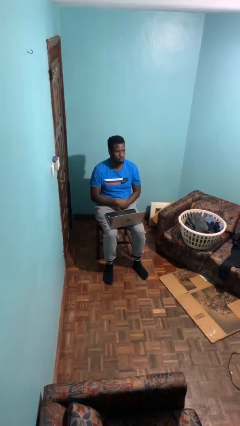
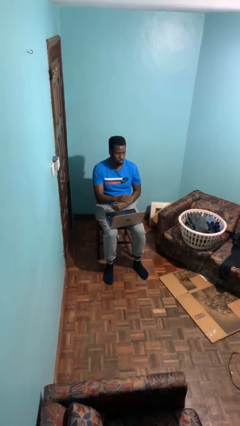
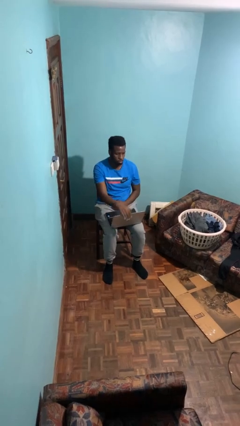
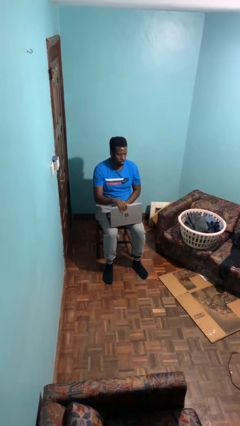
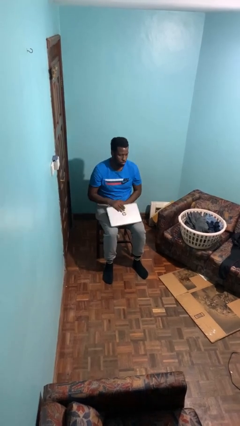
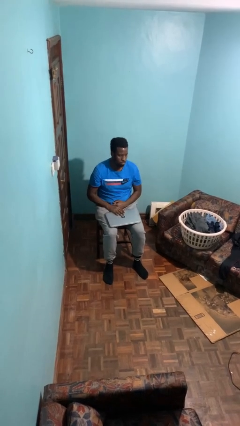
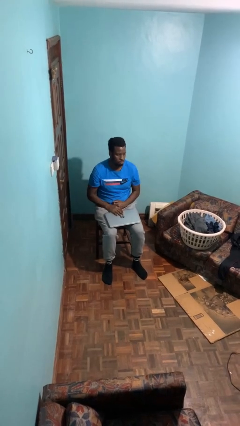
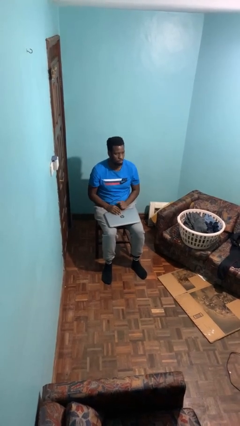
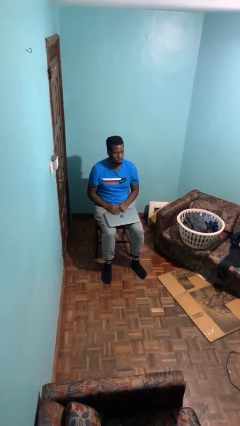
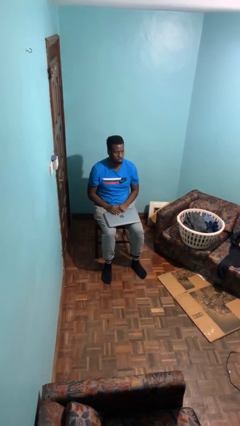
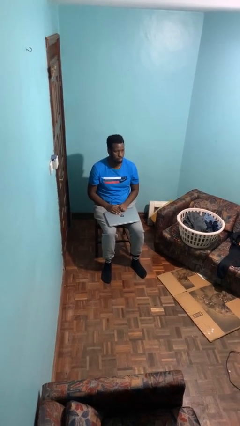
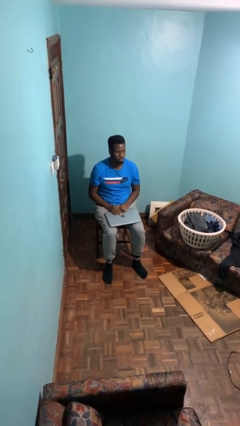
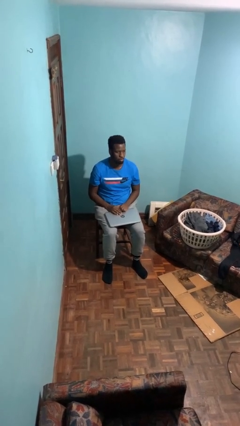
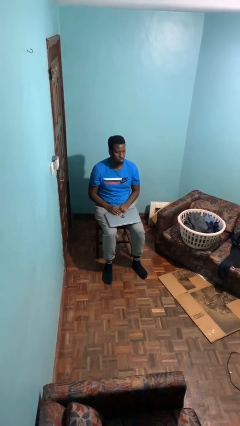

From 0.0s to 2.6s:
person closes laptop

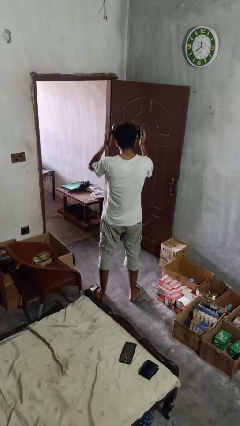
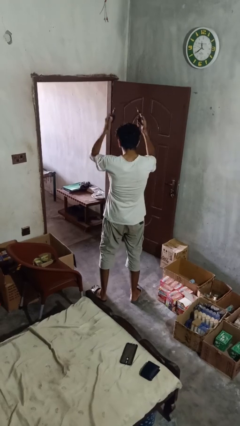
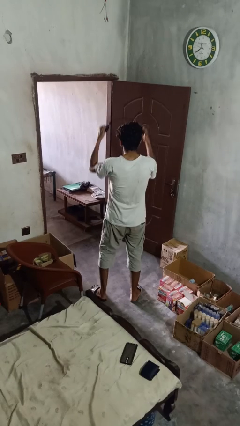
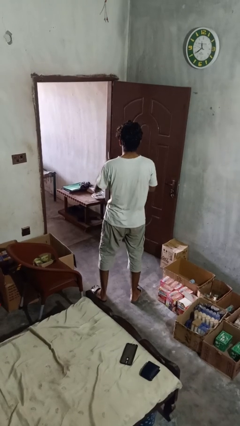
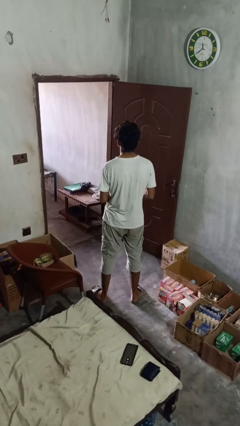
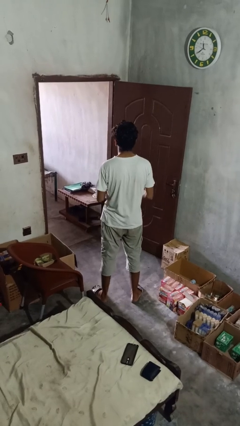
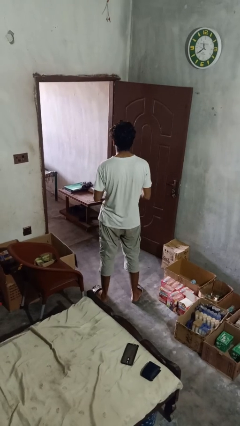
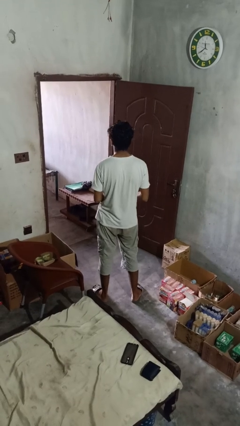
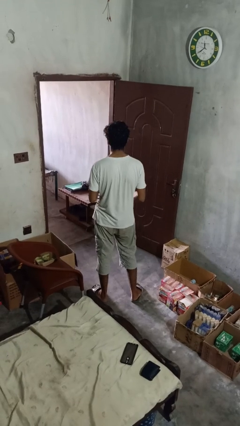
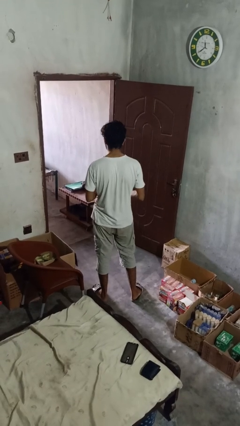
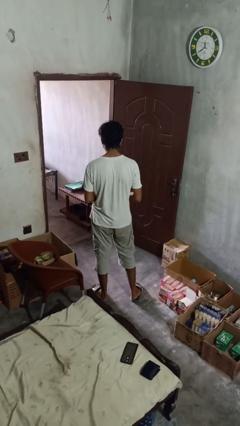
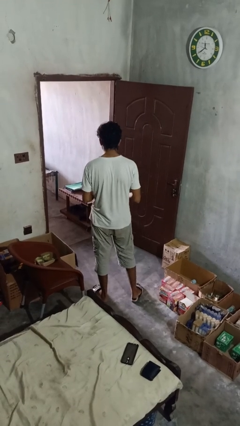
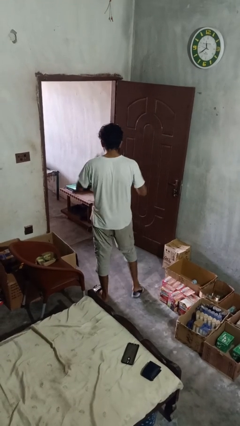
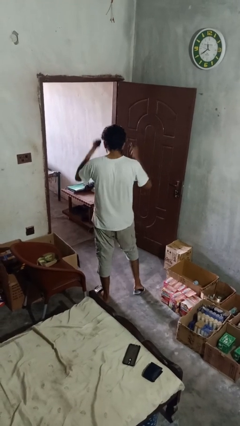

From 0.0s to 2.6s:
person takes off headphones

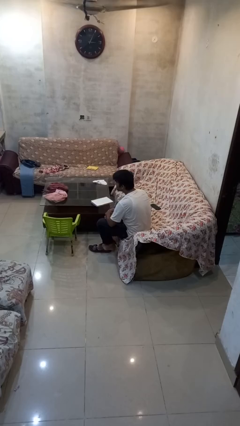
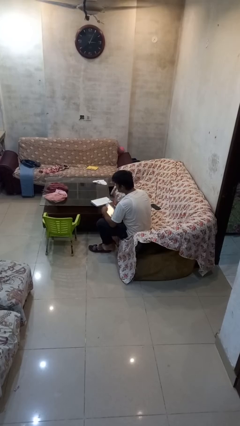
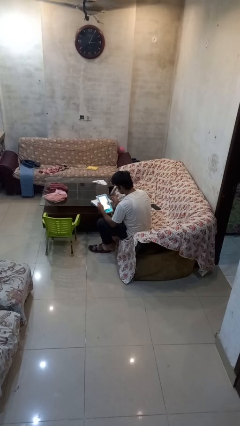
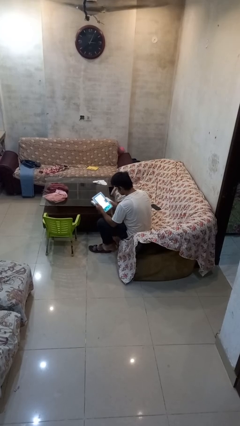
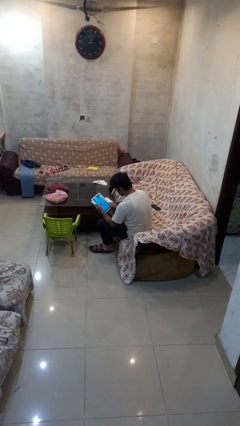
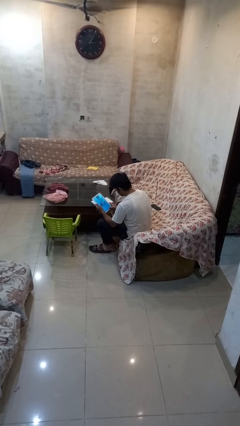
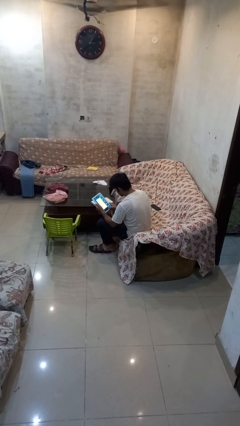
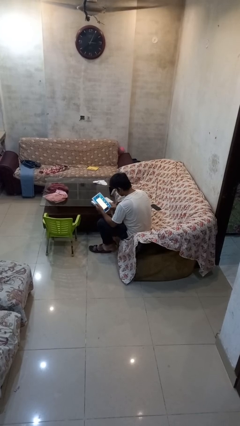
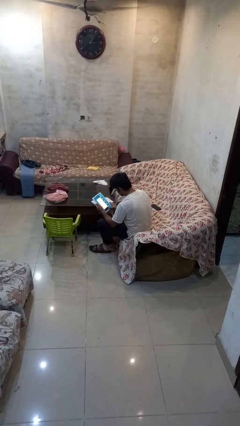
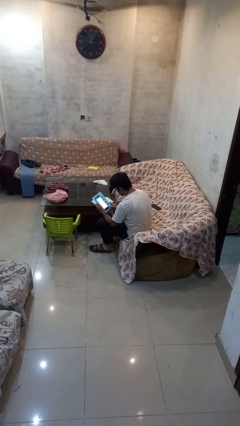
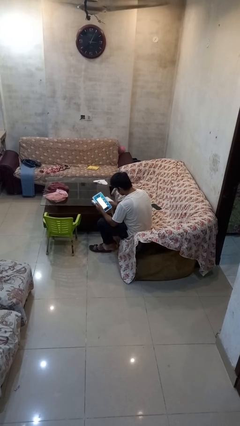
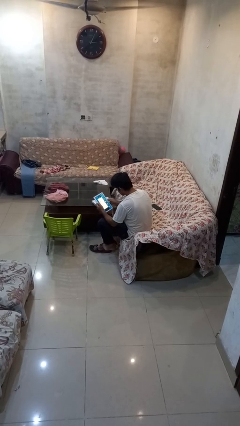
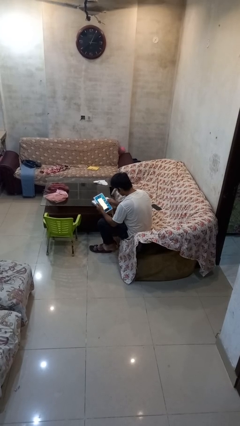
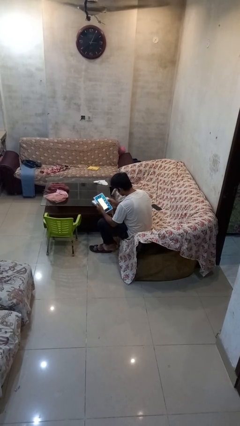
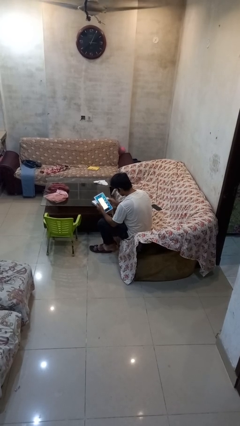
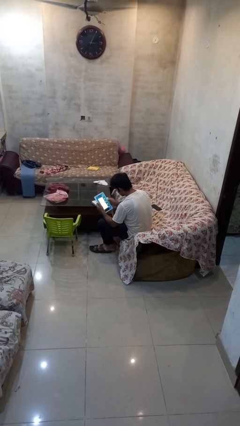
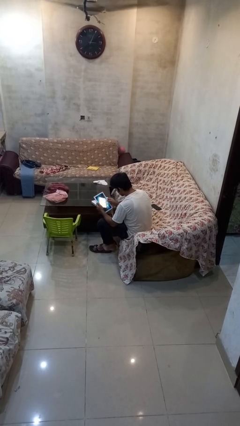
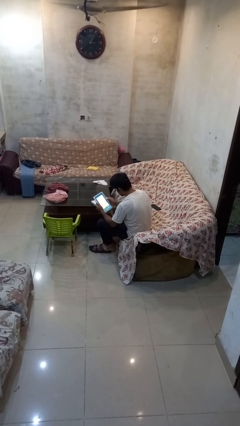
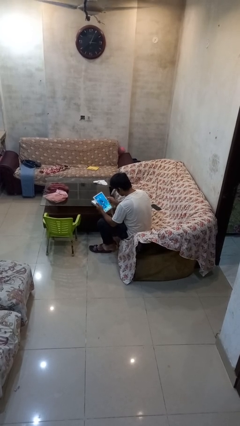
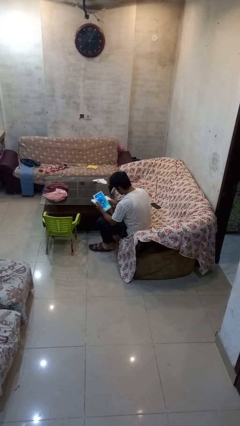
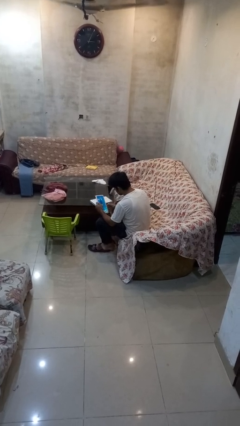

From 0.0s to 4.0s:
person interacts with tablet

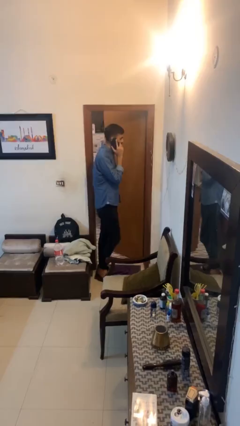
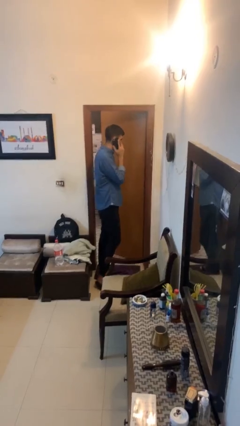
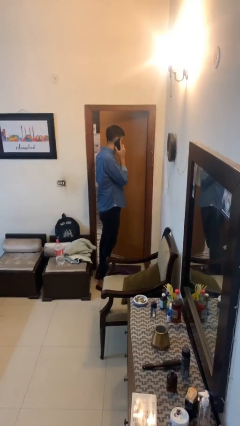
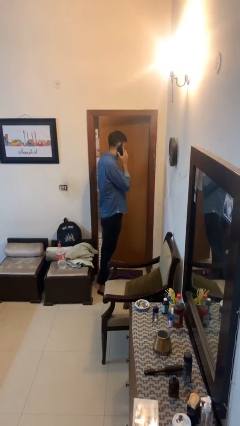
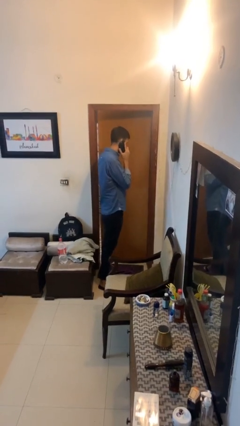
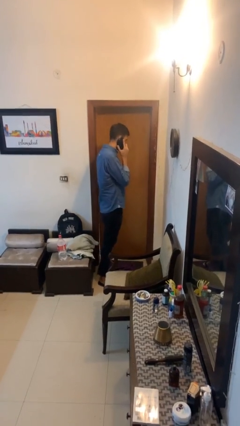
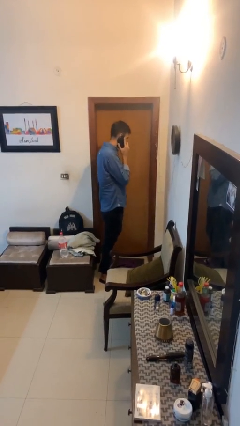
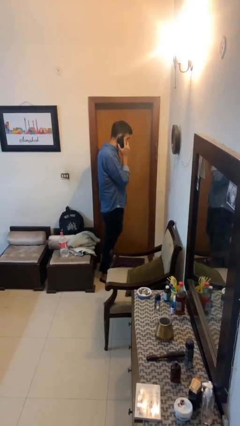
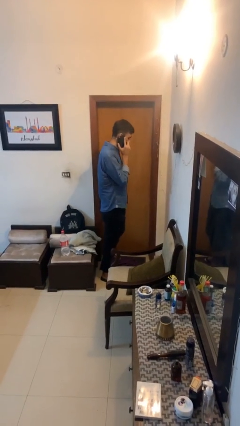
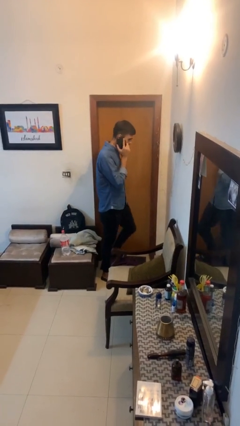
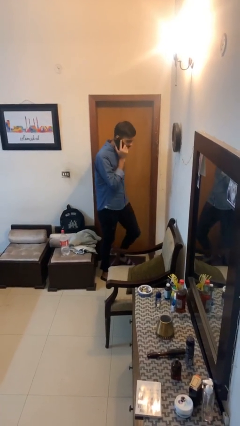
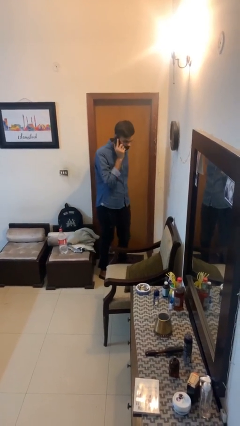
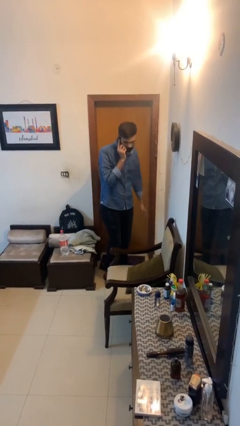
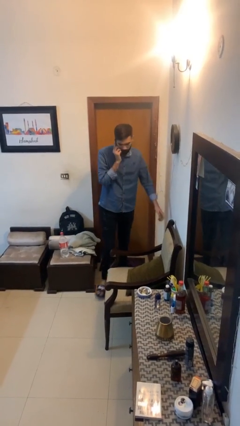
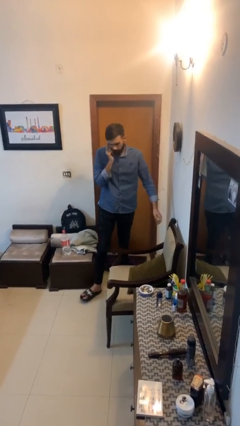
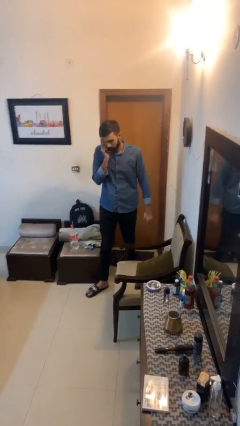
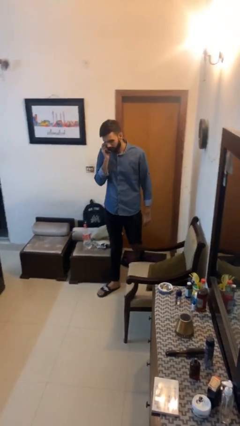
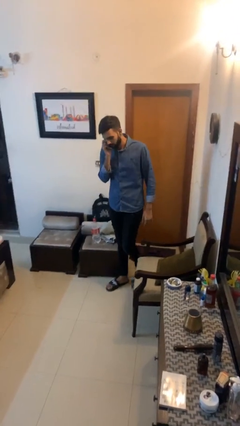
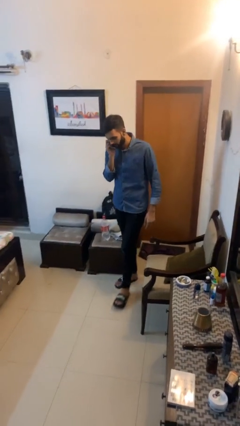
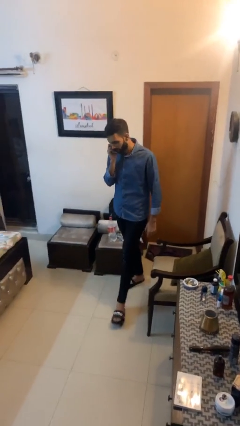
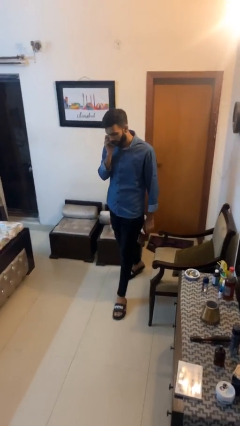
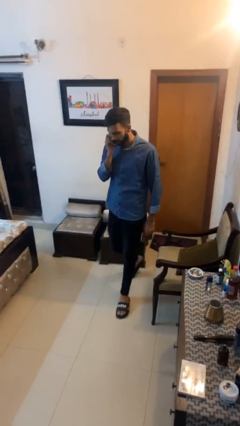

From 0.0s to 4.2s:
person closes facility door

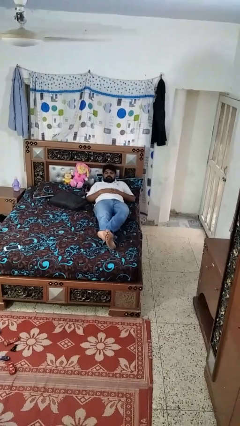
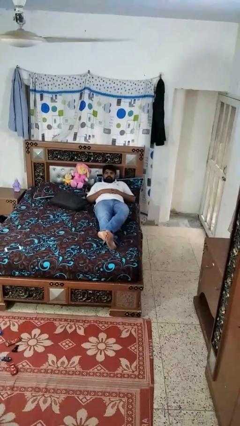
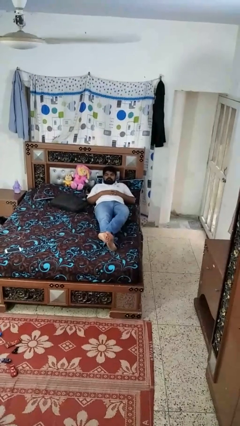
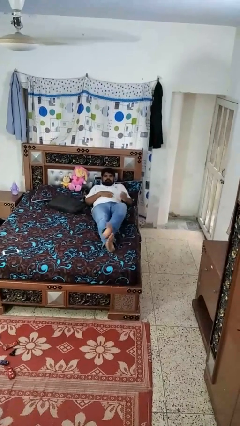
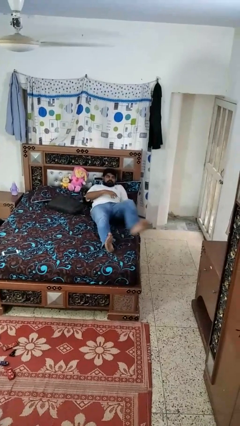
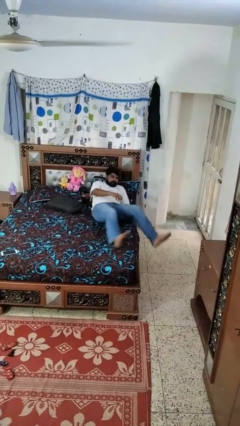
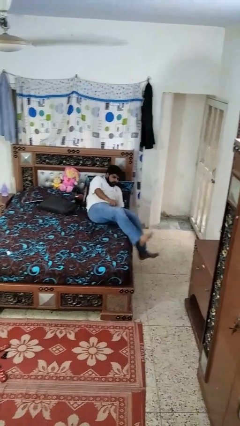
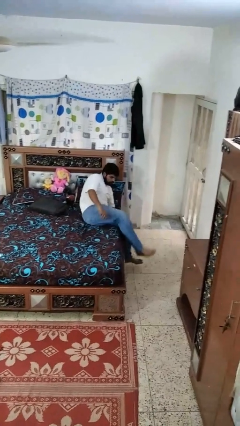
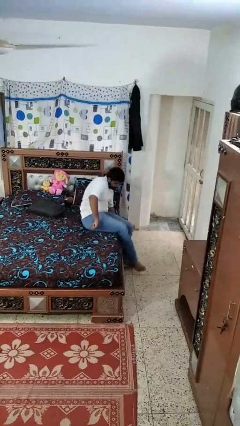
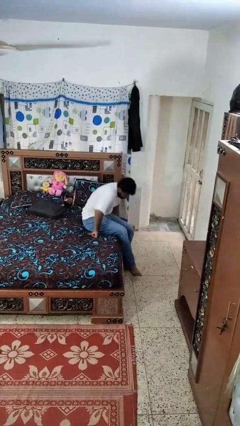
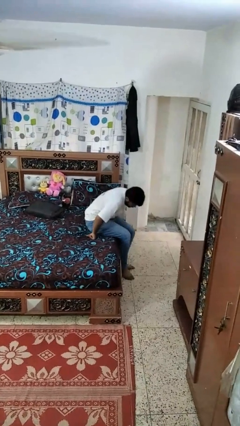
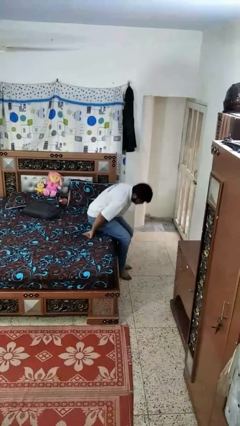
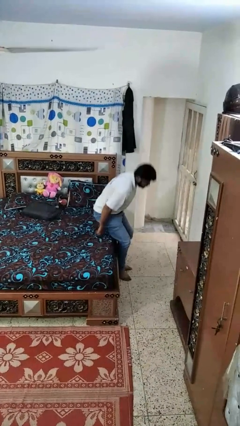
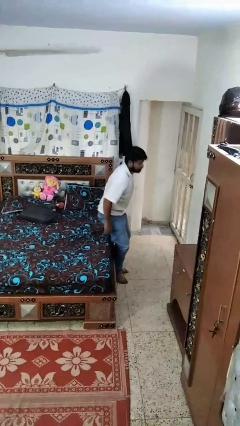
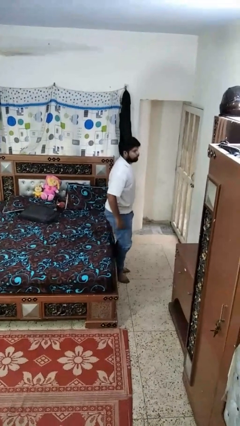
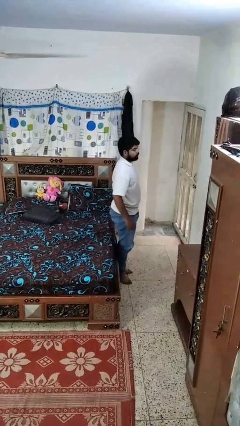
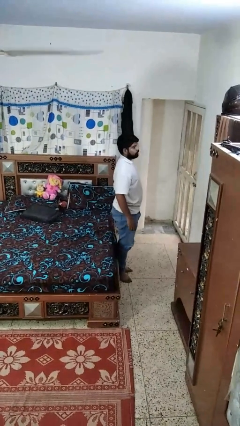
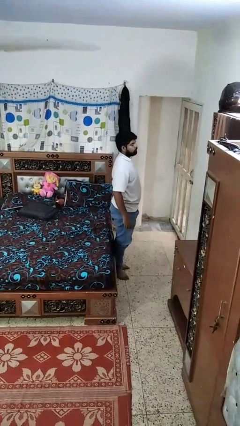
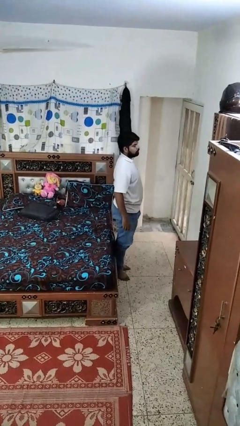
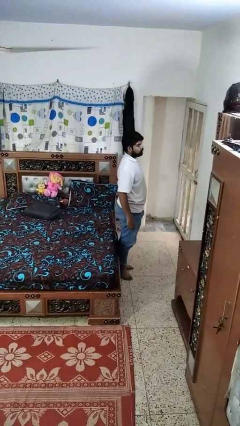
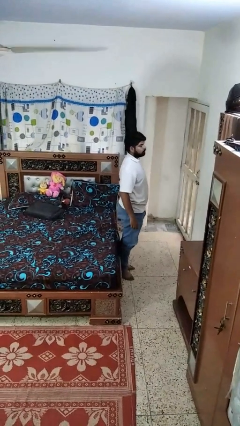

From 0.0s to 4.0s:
person stands up

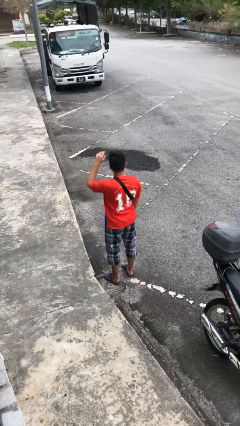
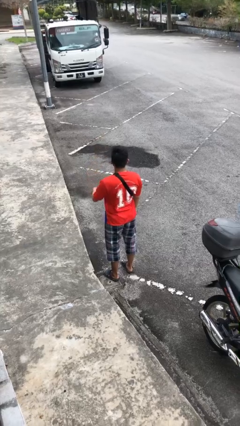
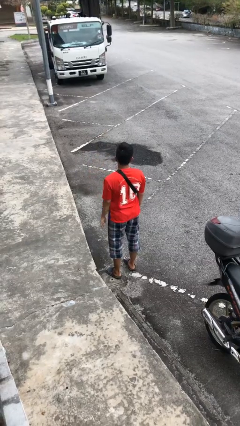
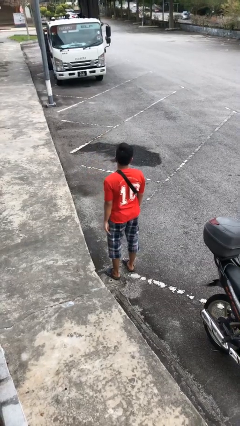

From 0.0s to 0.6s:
person gestures lower hand
